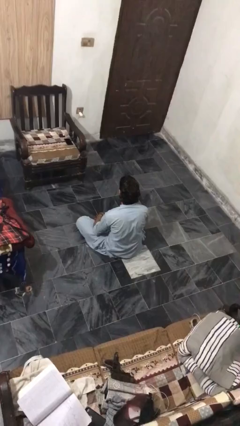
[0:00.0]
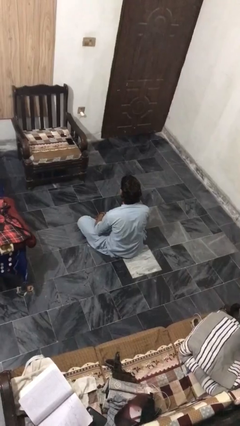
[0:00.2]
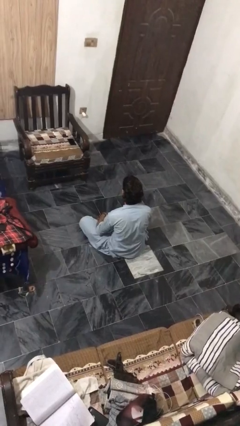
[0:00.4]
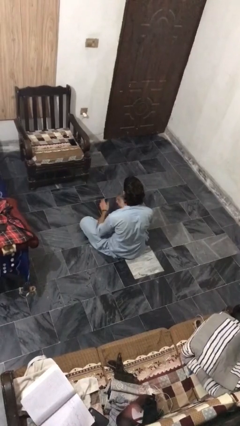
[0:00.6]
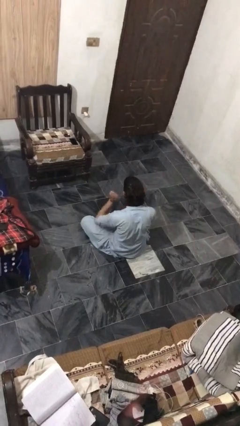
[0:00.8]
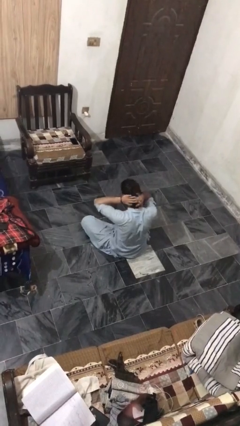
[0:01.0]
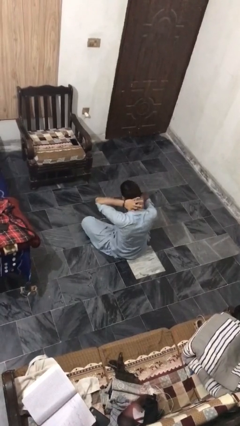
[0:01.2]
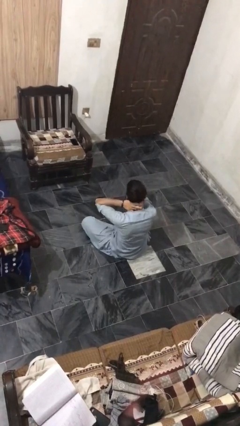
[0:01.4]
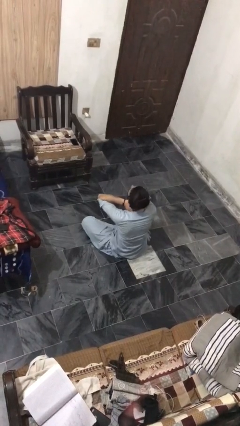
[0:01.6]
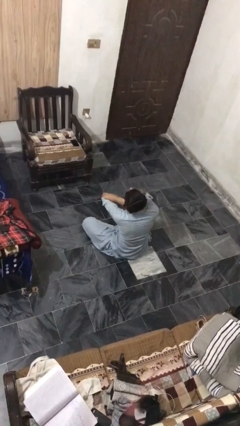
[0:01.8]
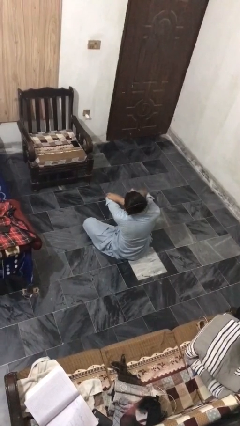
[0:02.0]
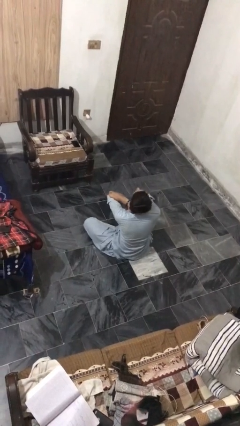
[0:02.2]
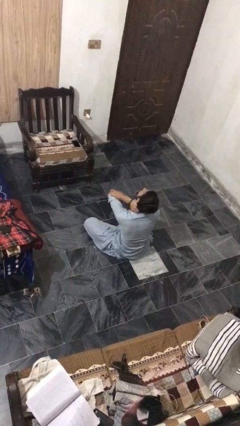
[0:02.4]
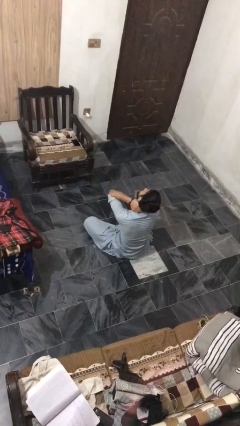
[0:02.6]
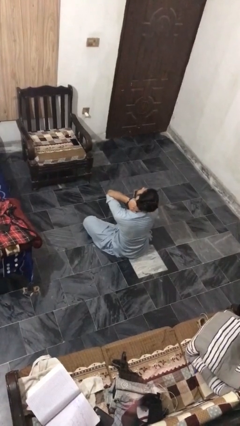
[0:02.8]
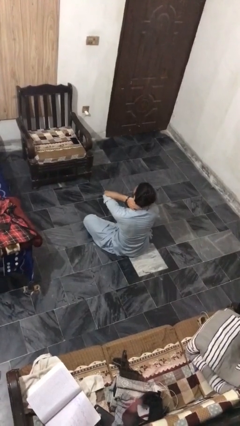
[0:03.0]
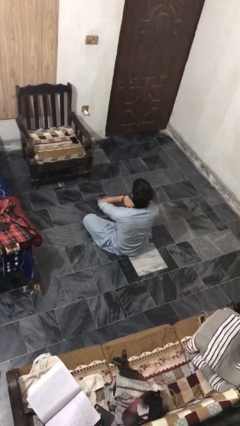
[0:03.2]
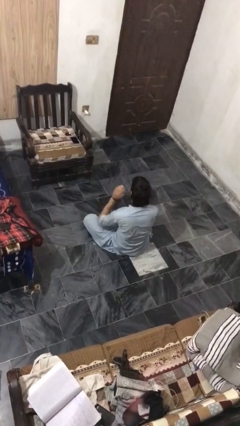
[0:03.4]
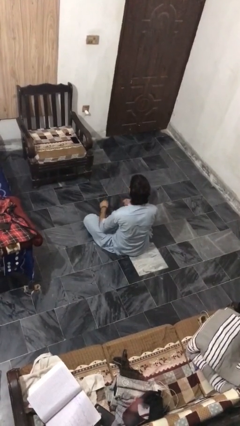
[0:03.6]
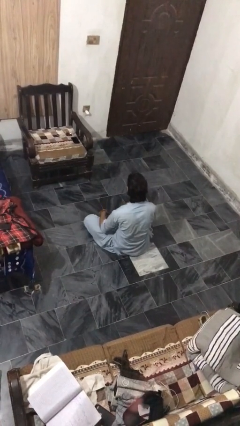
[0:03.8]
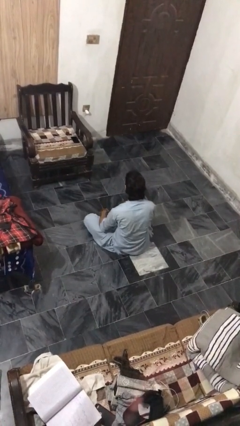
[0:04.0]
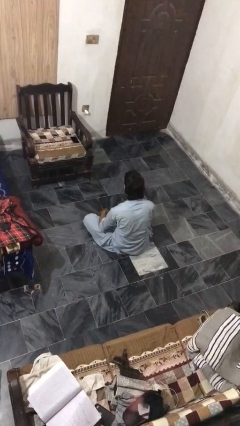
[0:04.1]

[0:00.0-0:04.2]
person rubs neck

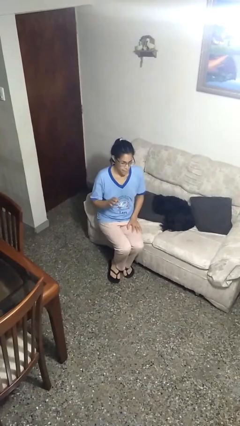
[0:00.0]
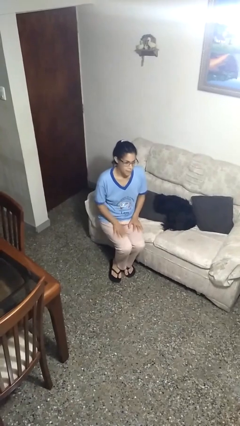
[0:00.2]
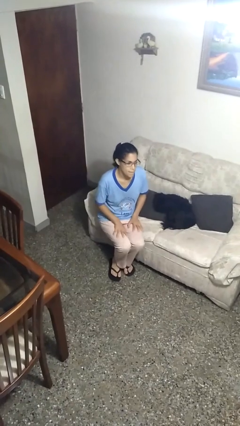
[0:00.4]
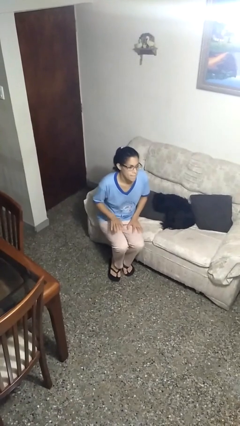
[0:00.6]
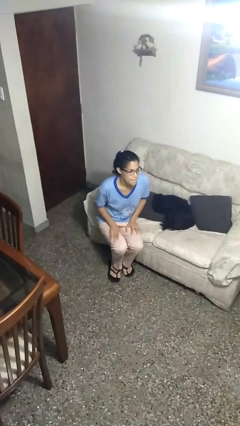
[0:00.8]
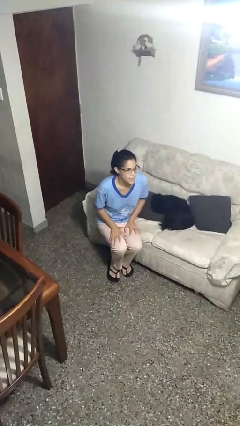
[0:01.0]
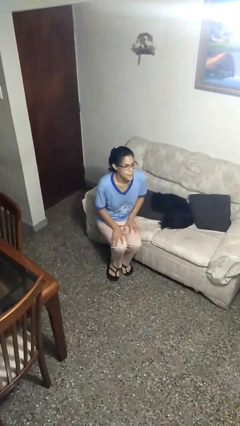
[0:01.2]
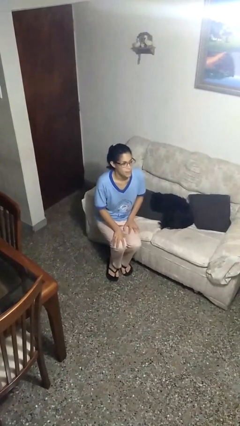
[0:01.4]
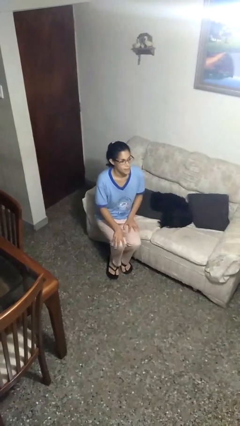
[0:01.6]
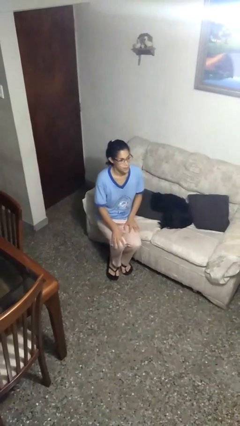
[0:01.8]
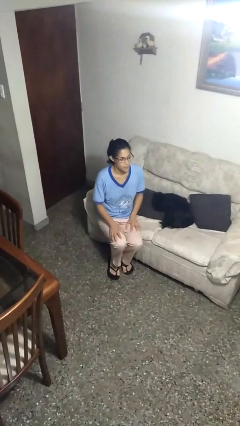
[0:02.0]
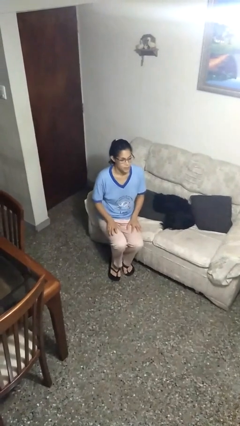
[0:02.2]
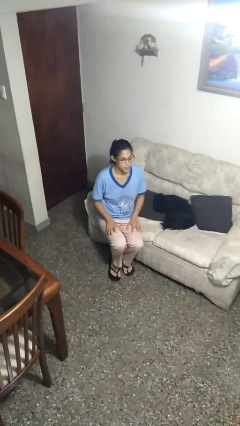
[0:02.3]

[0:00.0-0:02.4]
person slaps hands on thighs

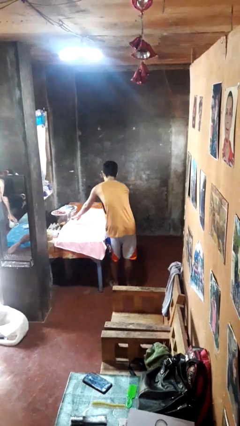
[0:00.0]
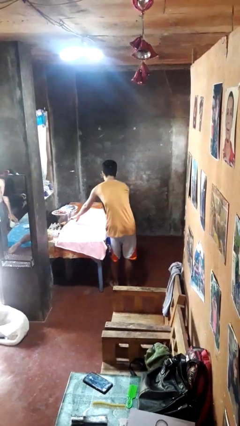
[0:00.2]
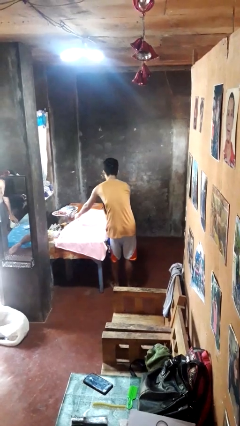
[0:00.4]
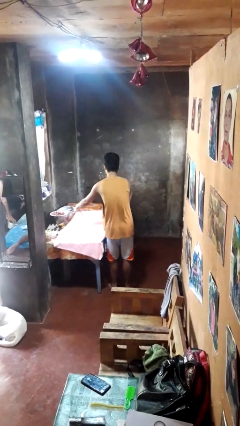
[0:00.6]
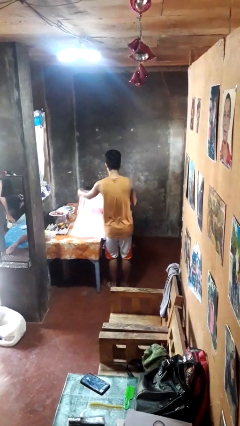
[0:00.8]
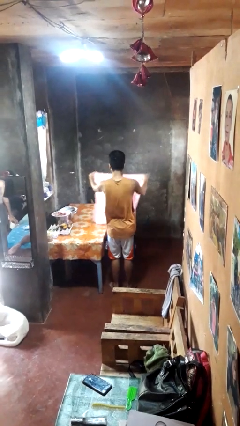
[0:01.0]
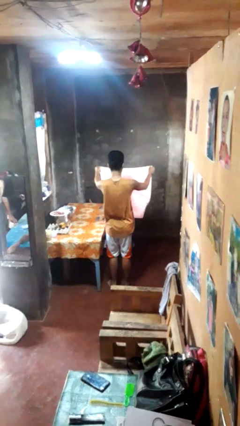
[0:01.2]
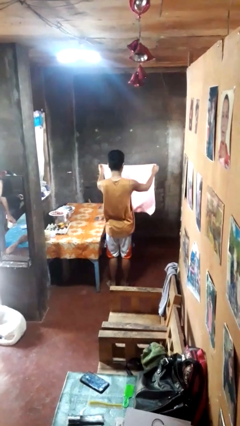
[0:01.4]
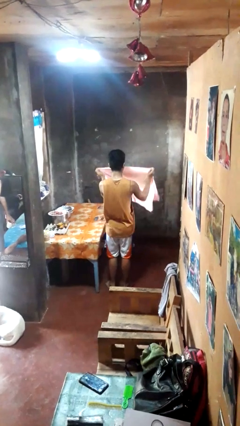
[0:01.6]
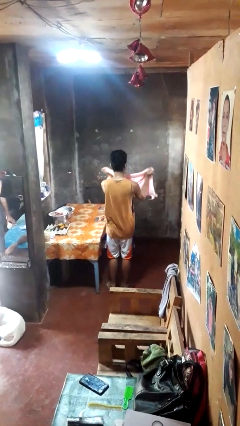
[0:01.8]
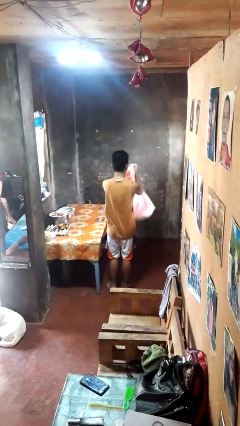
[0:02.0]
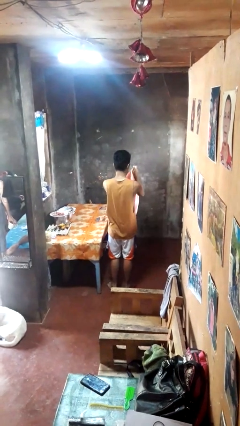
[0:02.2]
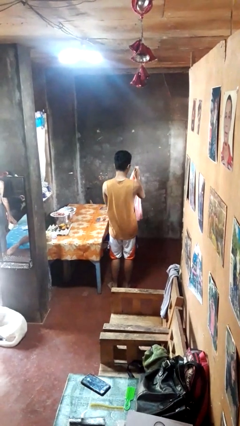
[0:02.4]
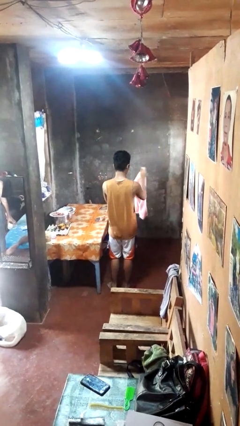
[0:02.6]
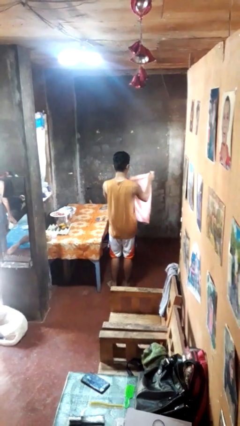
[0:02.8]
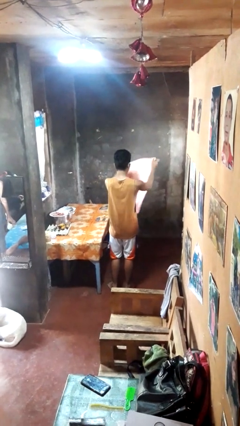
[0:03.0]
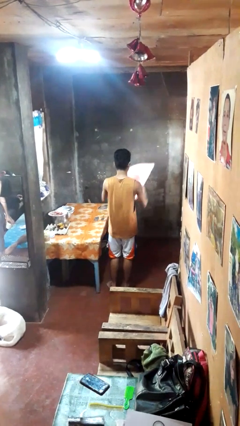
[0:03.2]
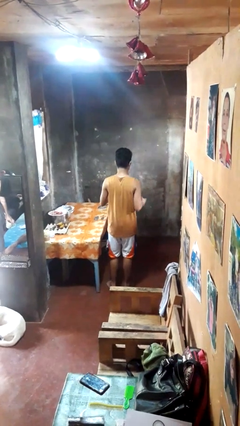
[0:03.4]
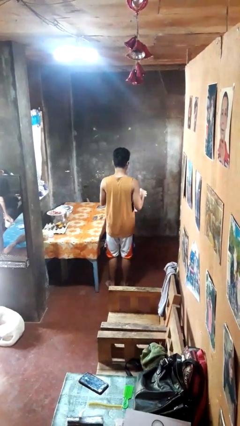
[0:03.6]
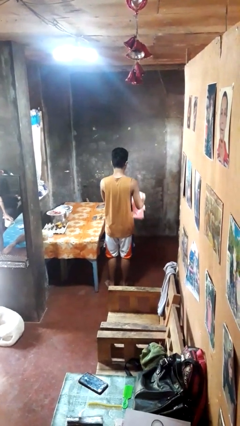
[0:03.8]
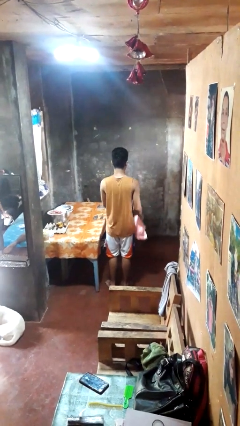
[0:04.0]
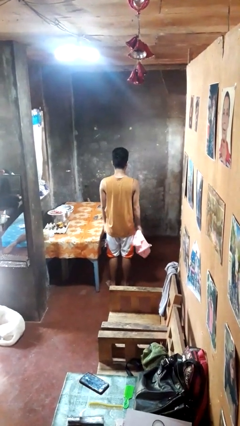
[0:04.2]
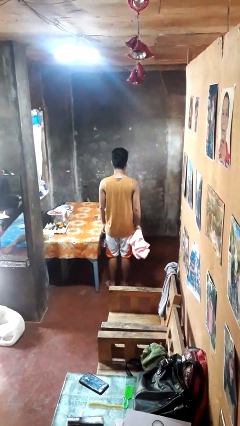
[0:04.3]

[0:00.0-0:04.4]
person folds tablecloth

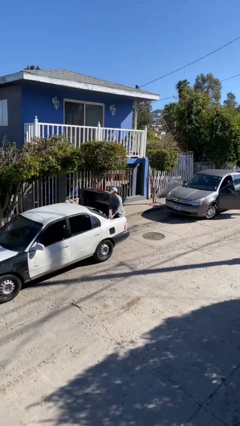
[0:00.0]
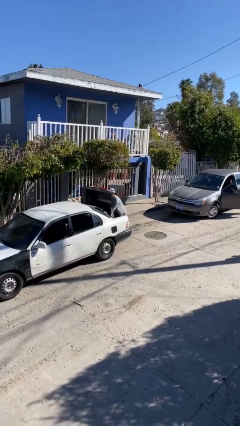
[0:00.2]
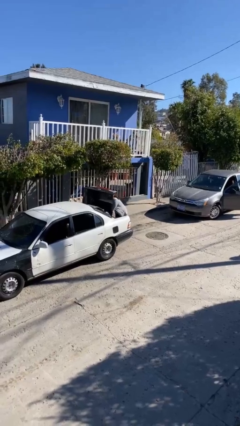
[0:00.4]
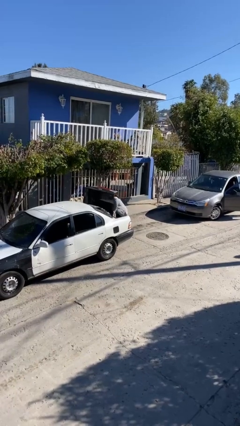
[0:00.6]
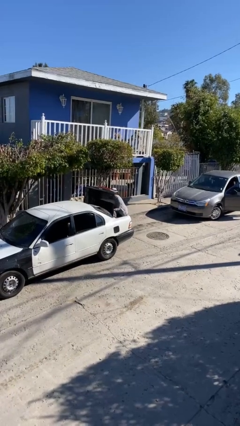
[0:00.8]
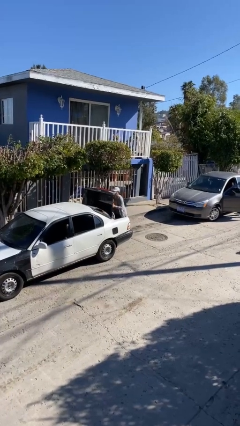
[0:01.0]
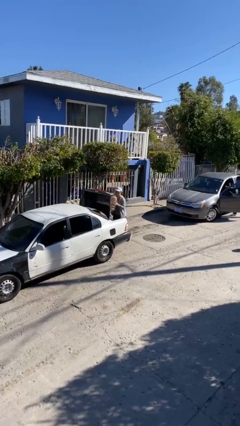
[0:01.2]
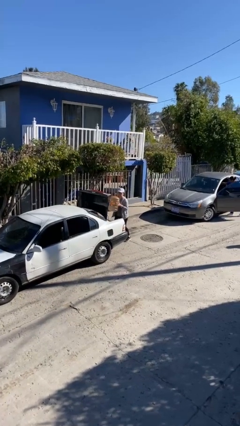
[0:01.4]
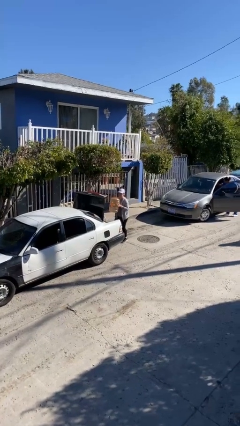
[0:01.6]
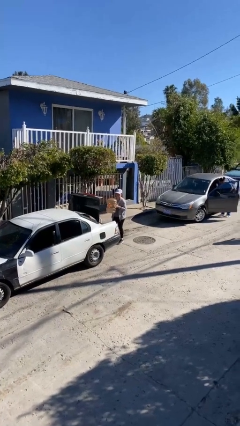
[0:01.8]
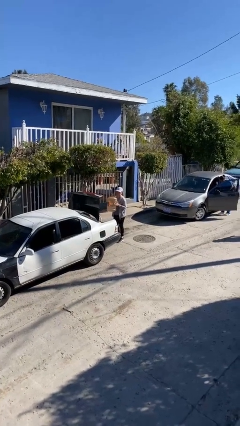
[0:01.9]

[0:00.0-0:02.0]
person unloads car

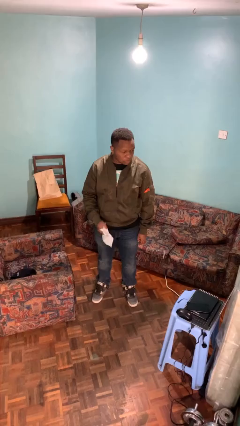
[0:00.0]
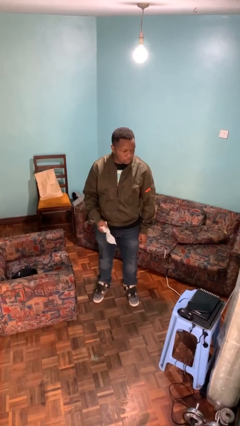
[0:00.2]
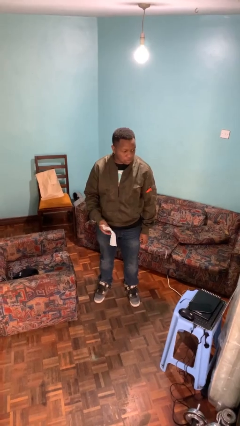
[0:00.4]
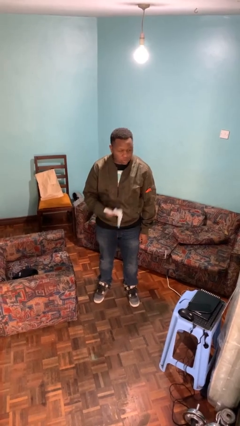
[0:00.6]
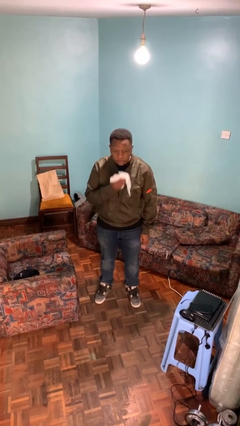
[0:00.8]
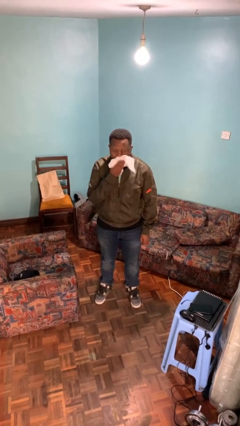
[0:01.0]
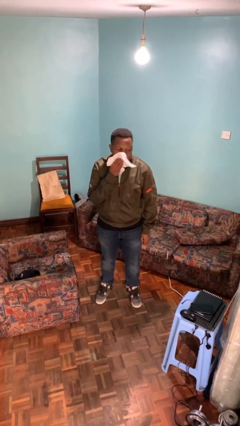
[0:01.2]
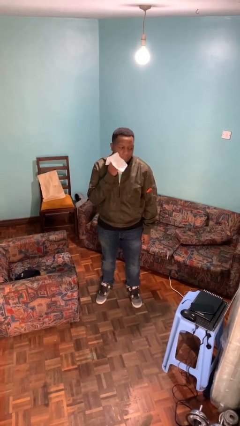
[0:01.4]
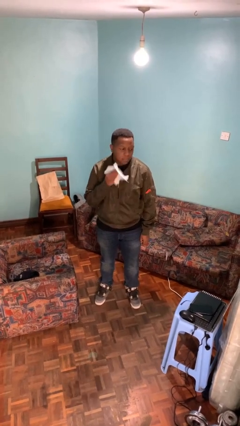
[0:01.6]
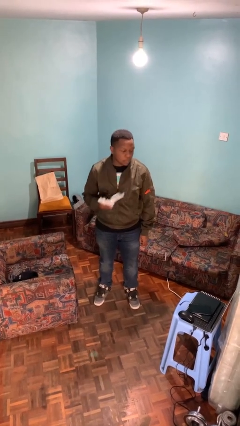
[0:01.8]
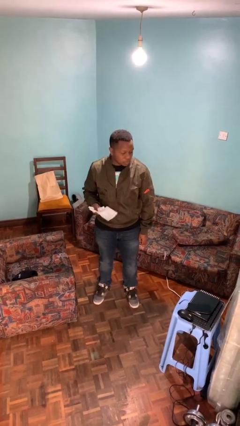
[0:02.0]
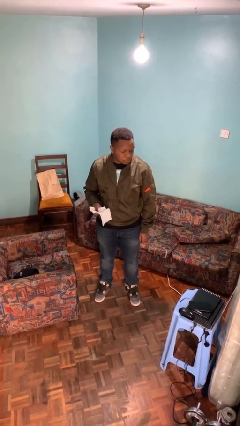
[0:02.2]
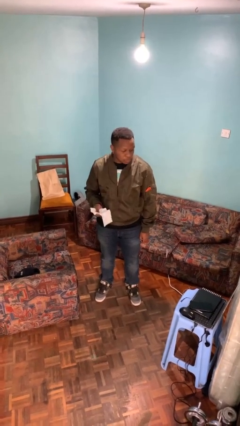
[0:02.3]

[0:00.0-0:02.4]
person wipes mouth with napkin

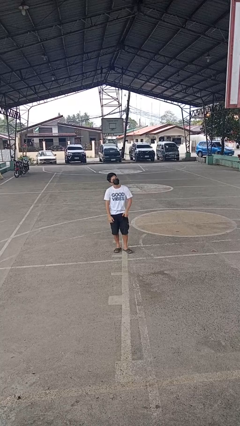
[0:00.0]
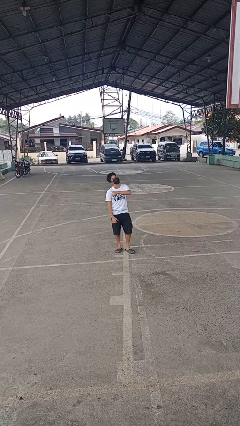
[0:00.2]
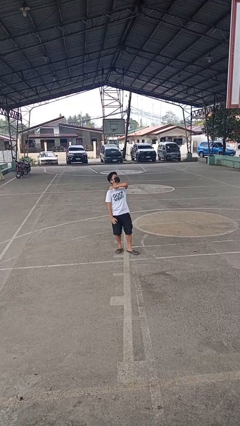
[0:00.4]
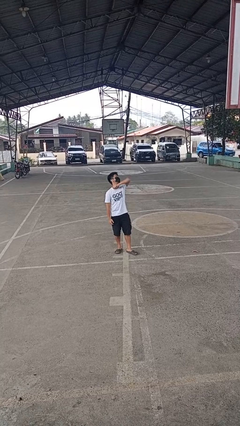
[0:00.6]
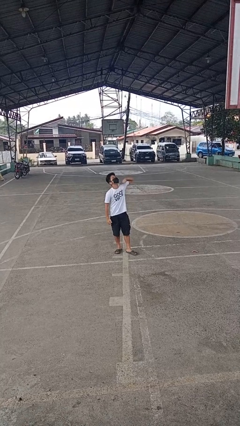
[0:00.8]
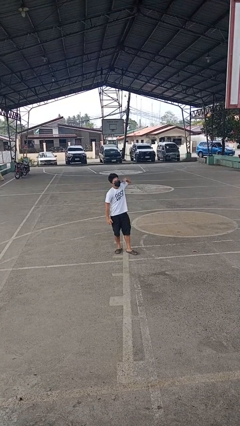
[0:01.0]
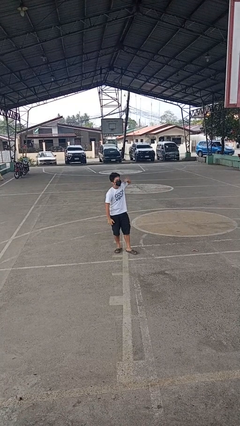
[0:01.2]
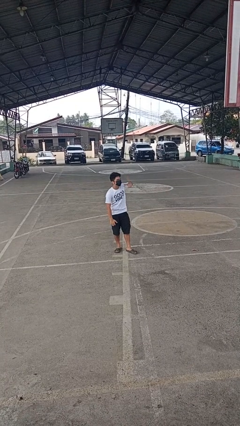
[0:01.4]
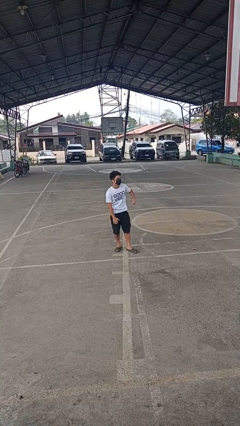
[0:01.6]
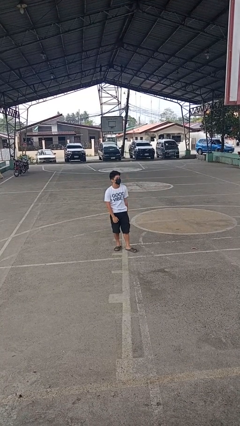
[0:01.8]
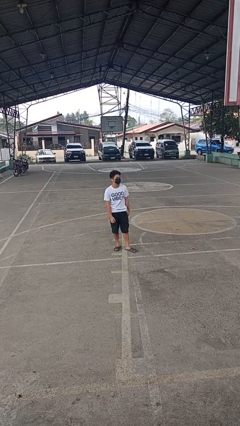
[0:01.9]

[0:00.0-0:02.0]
person gestures cut

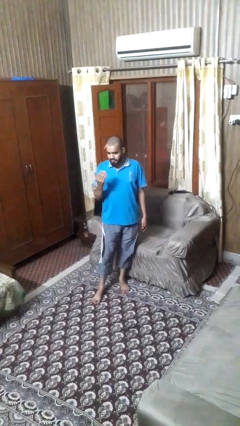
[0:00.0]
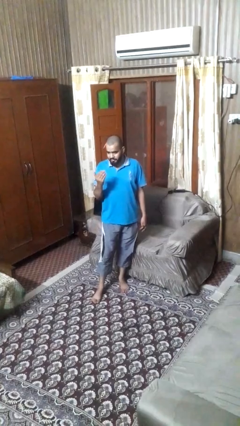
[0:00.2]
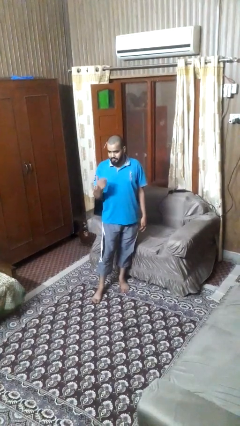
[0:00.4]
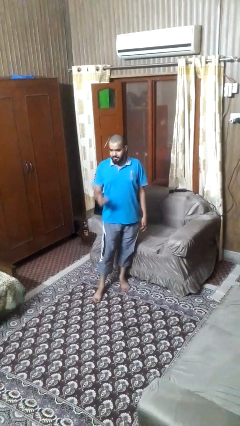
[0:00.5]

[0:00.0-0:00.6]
person gestures come here
